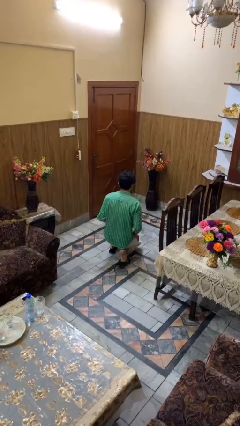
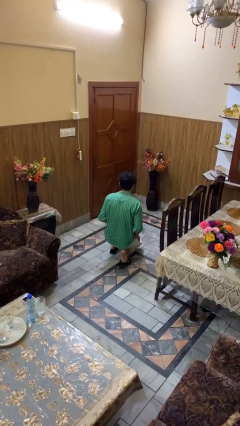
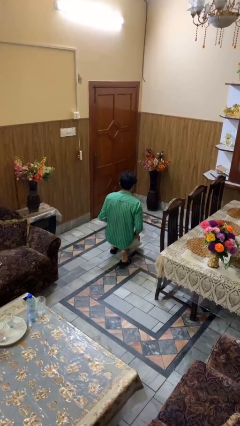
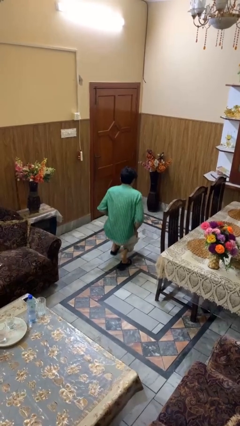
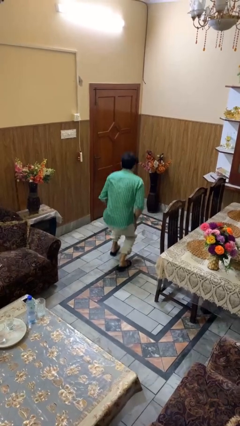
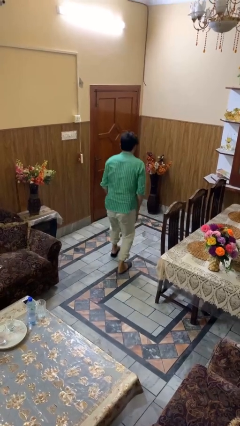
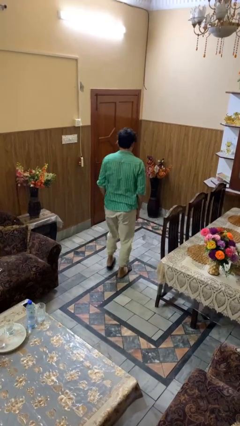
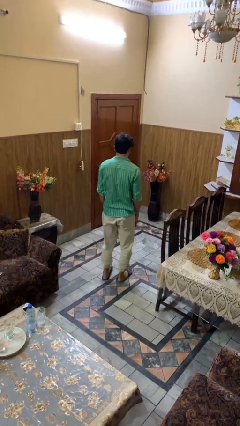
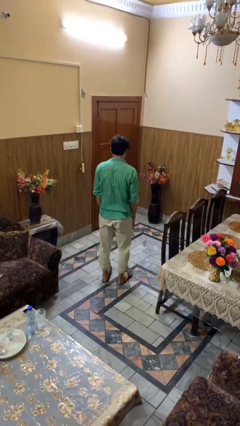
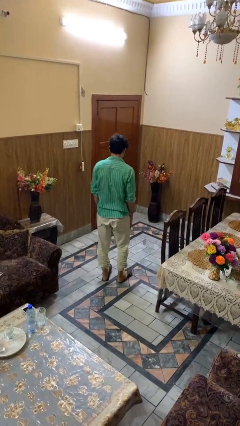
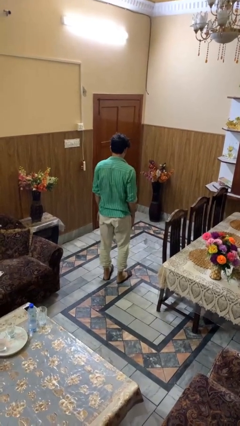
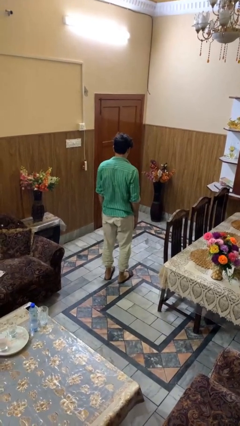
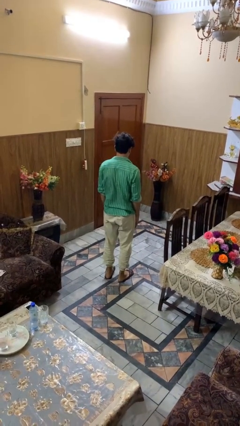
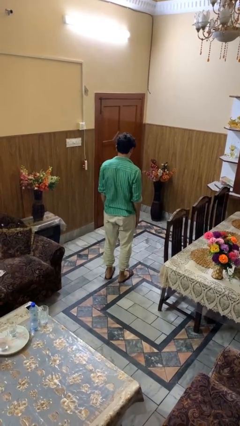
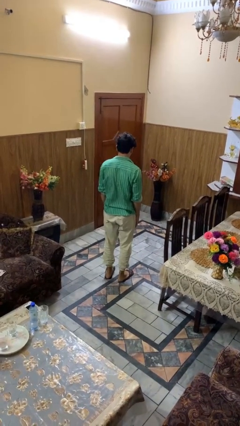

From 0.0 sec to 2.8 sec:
person stands up from floor

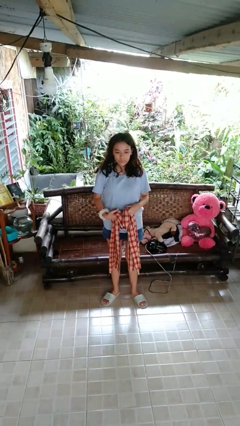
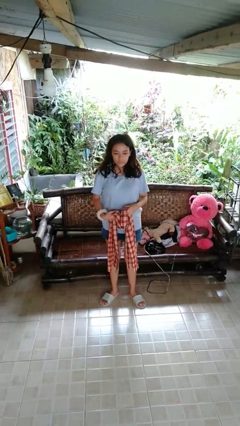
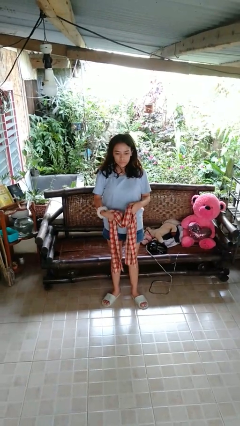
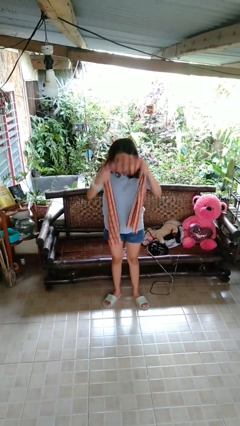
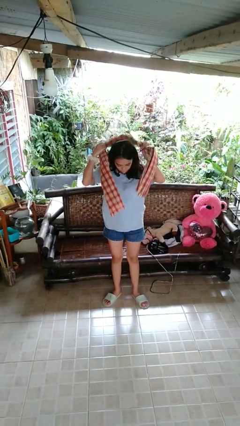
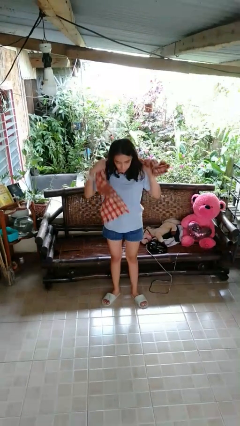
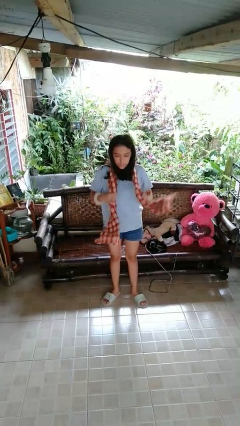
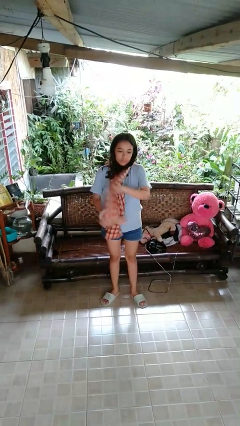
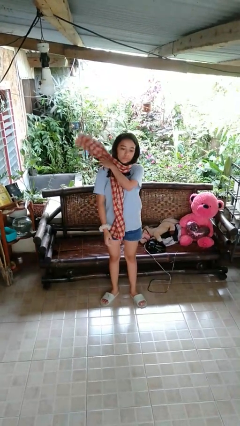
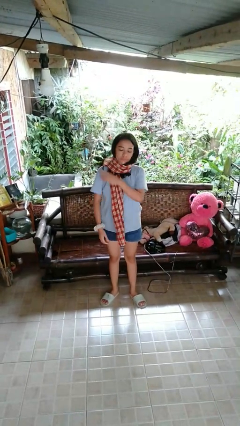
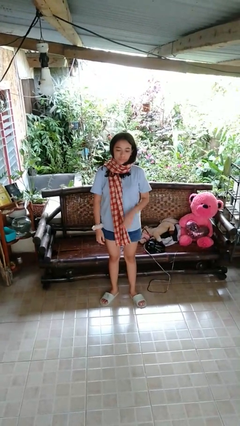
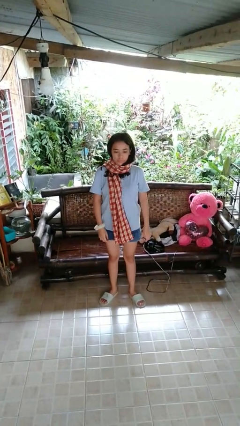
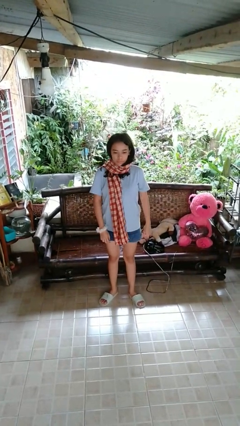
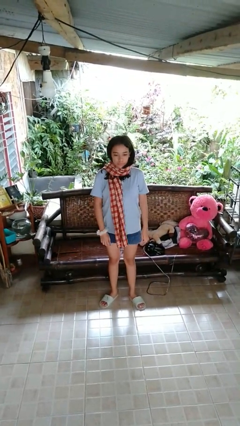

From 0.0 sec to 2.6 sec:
person puts on scarf

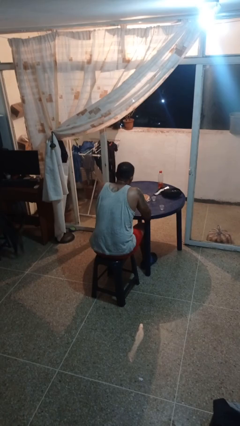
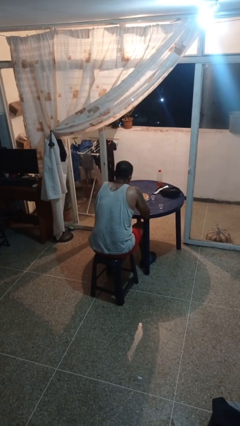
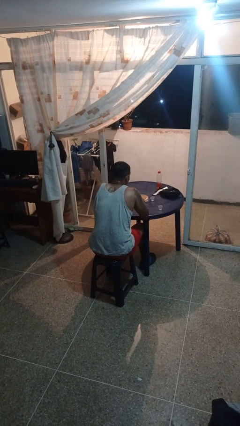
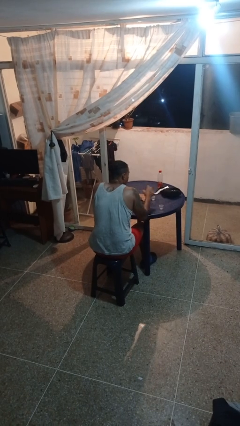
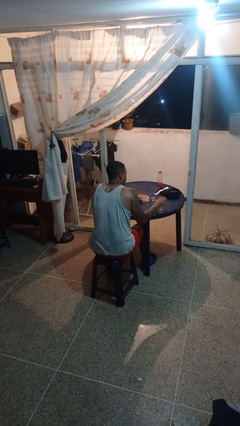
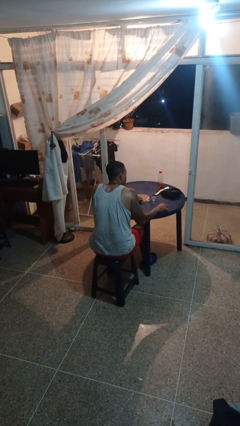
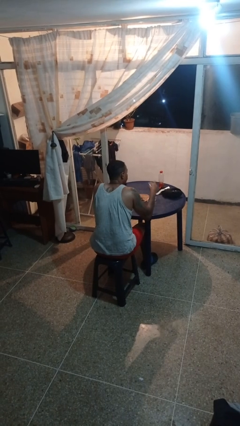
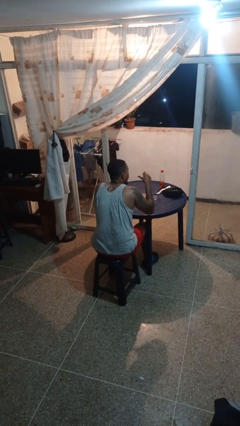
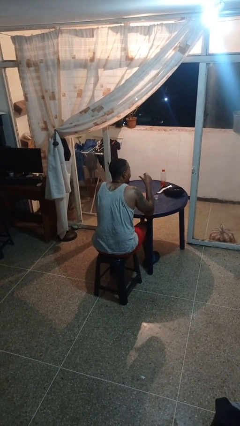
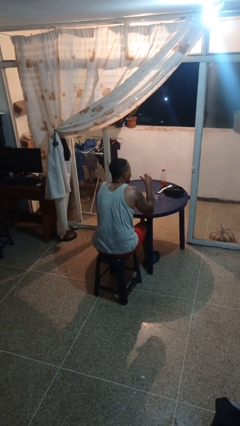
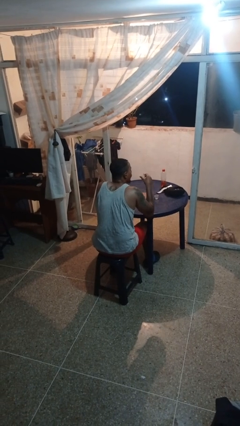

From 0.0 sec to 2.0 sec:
person picks up object from table

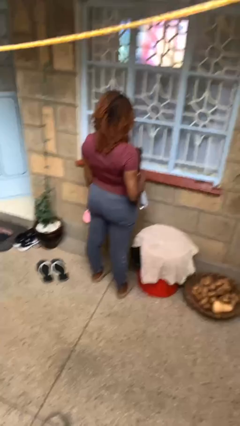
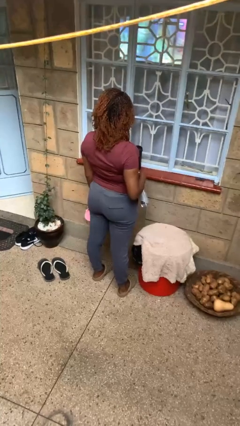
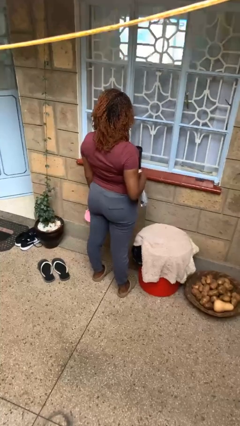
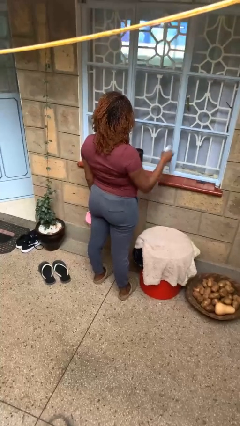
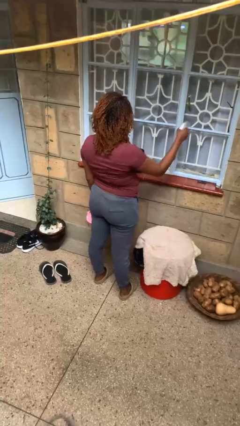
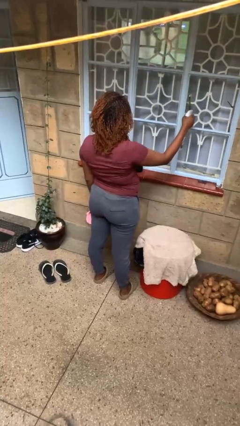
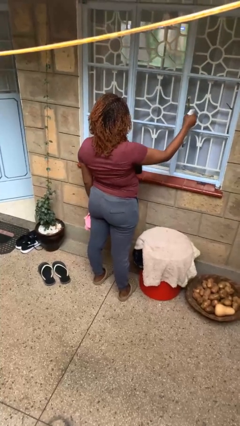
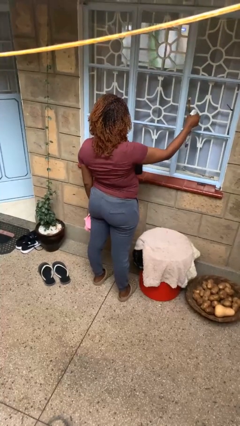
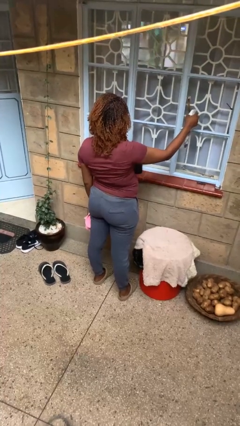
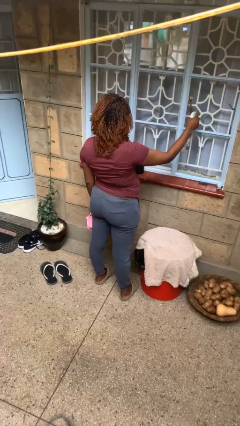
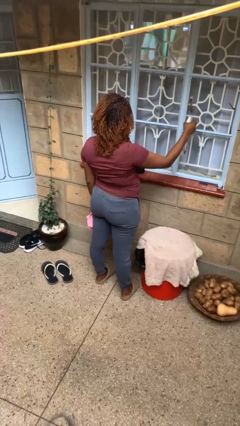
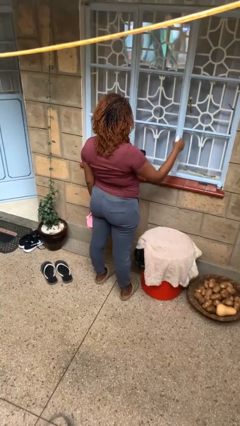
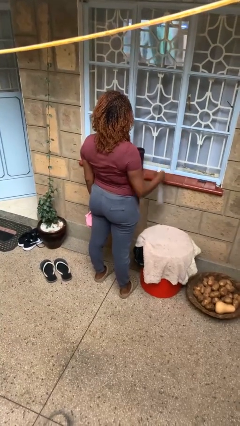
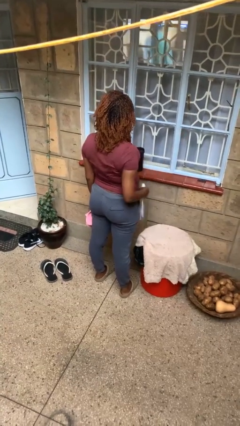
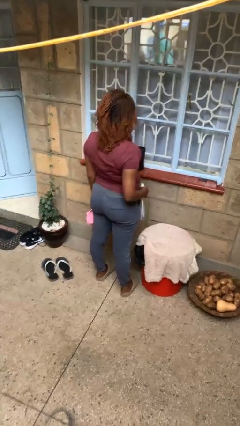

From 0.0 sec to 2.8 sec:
person sprays from bottle

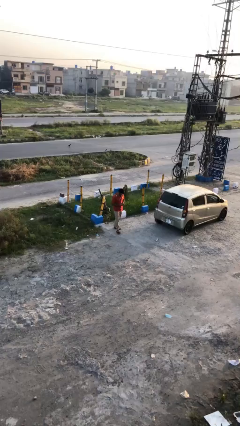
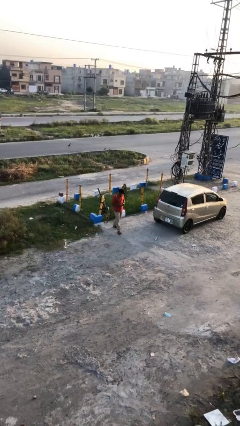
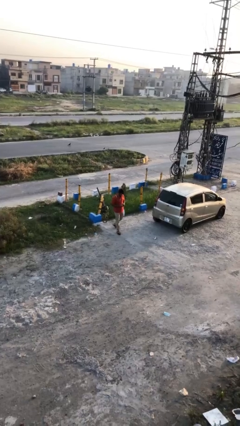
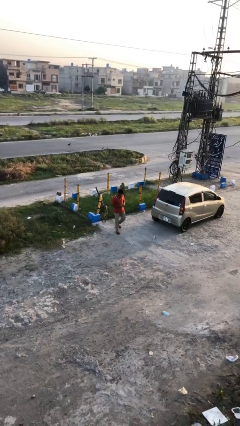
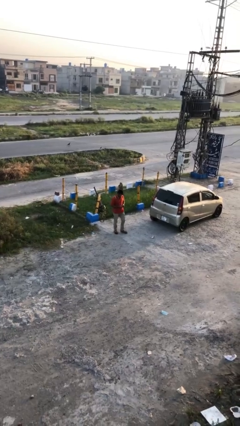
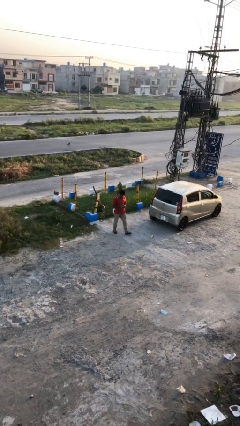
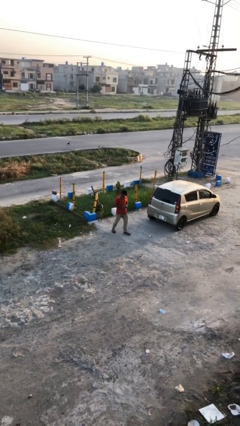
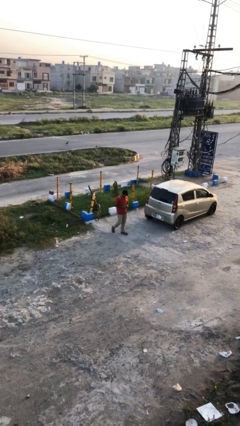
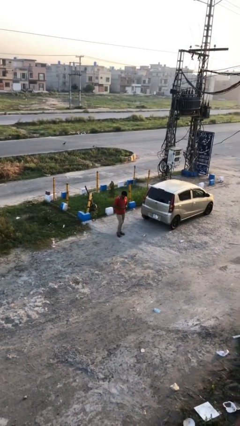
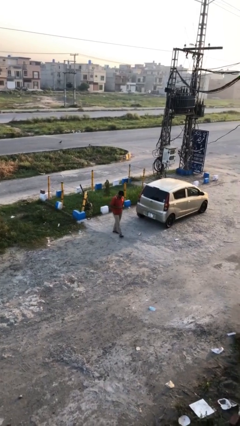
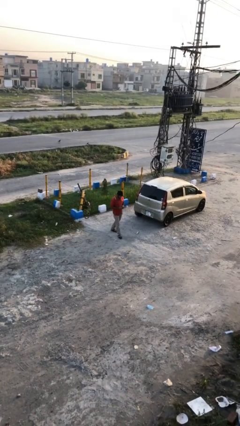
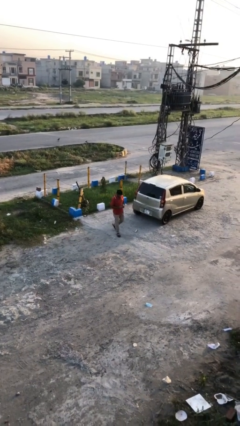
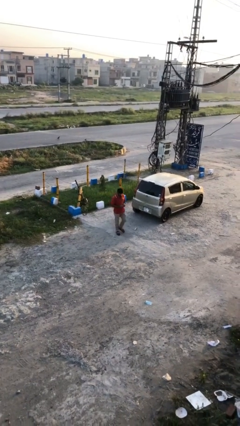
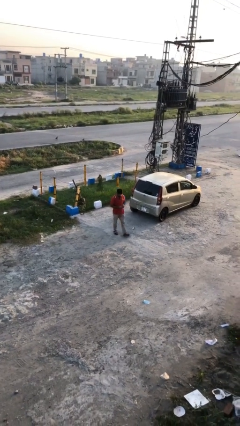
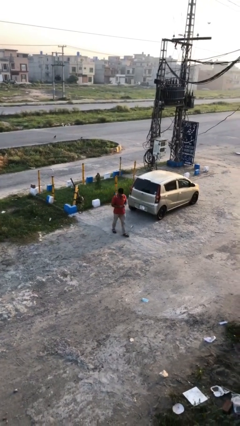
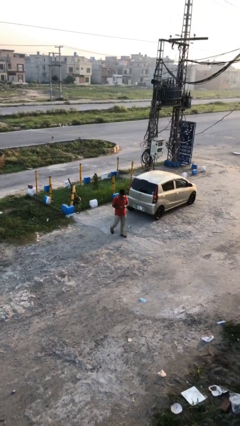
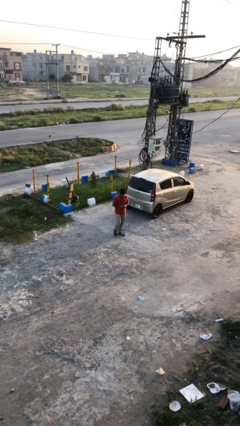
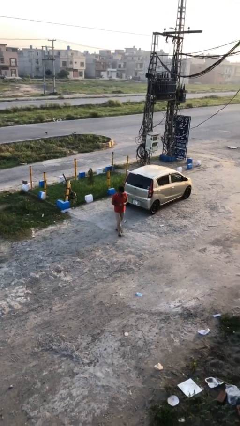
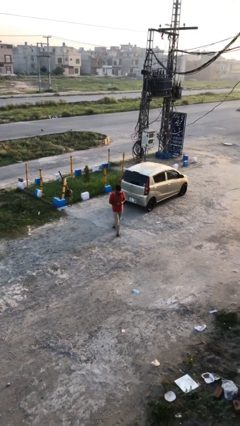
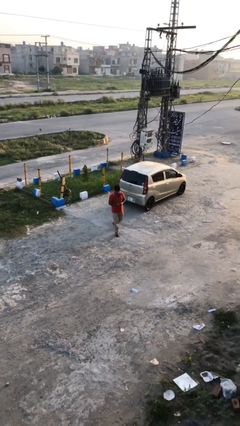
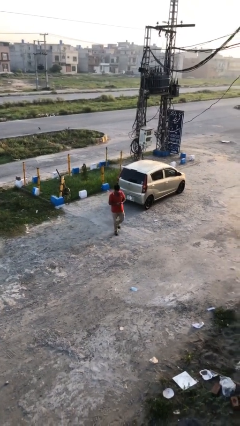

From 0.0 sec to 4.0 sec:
person texts on phone

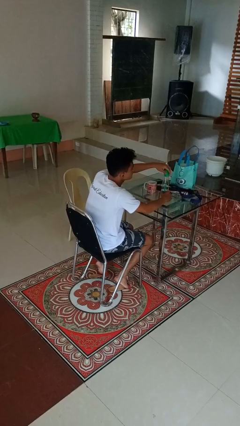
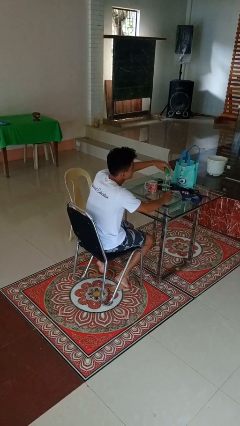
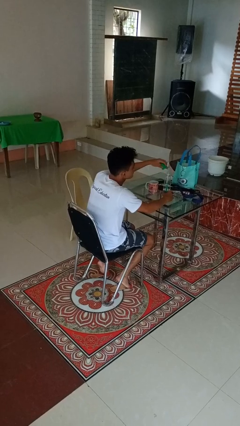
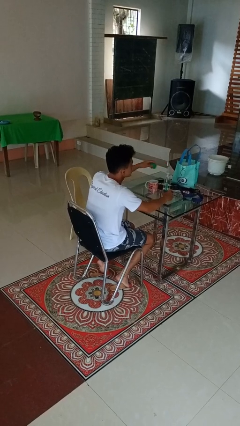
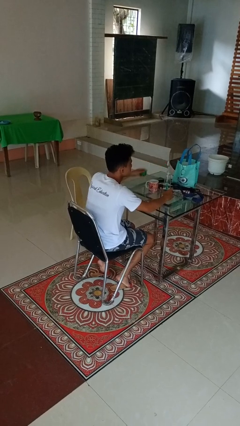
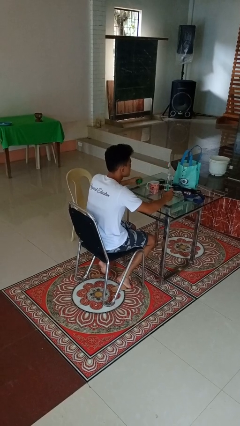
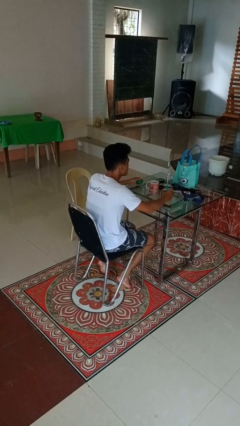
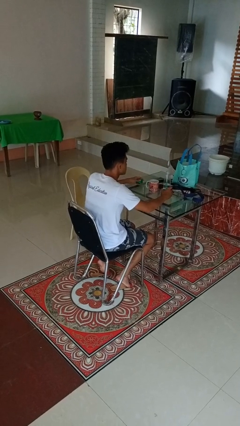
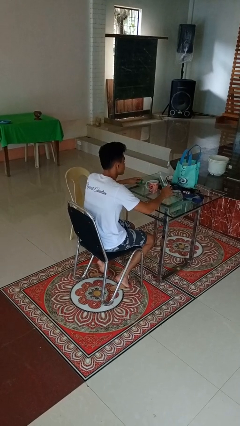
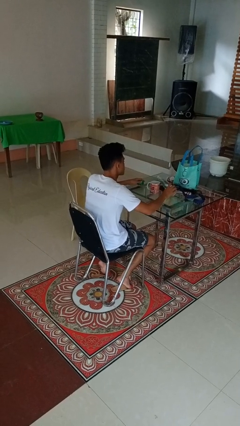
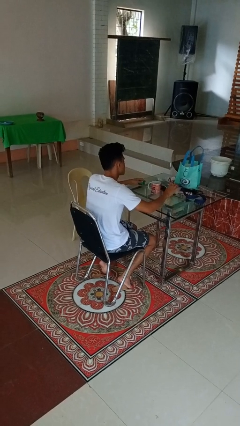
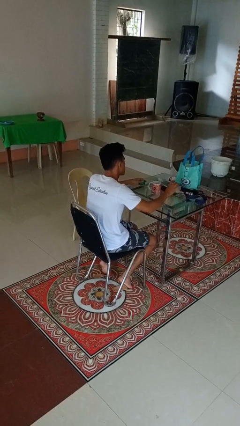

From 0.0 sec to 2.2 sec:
person unscrews lid from bottle

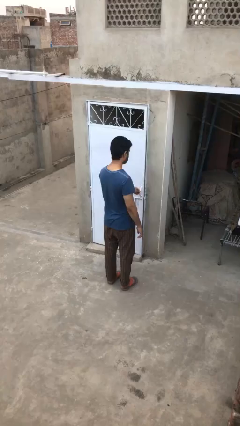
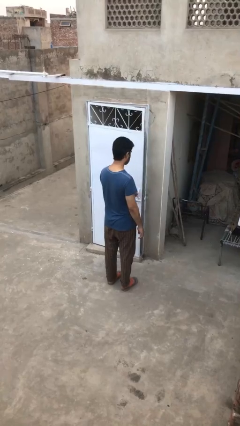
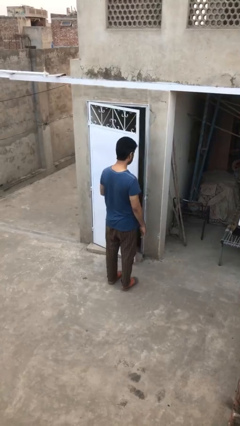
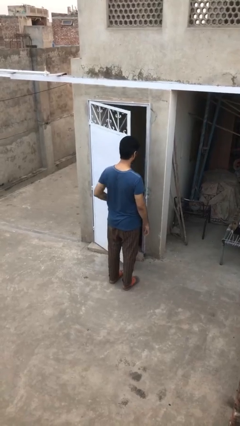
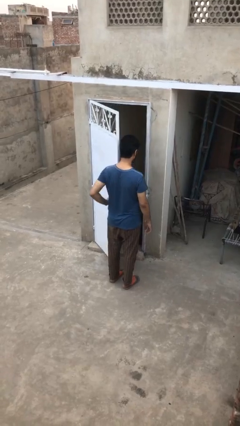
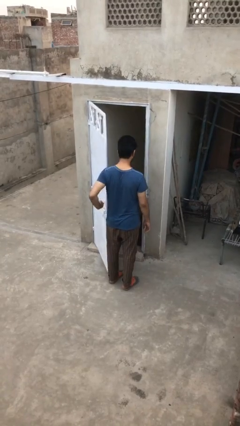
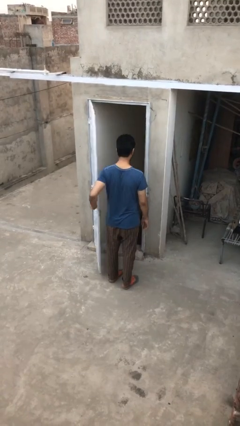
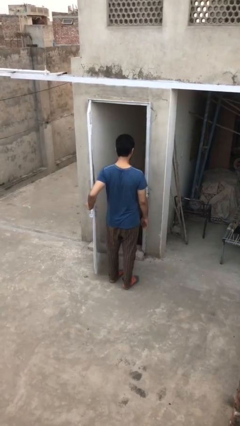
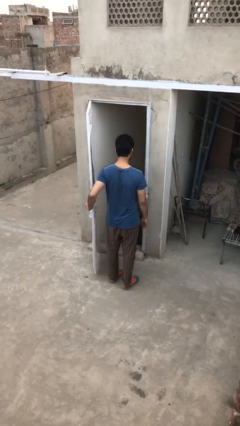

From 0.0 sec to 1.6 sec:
person opens facility door
